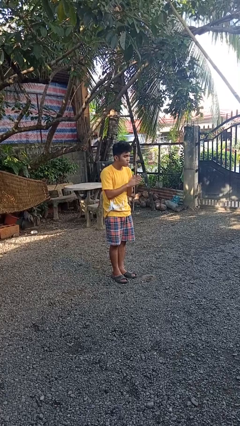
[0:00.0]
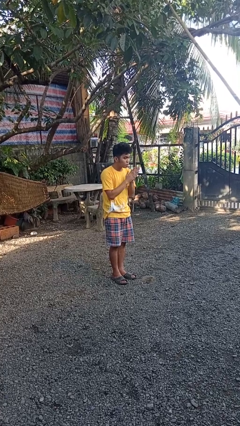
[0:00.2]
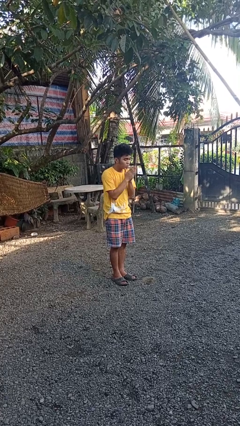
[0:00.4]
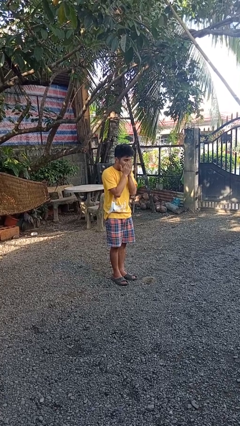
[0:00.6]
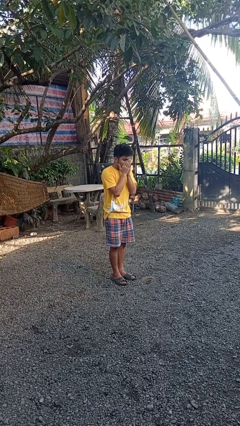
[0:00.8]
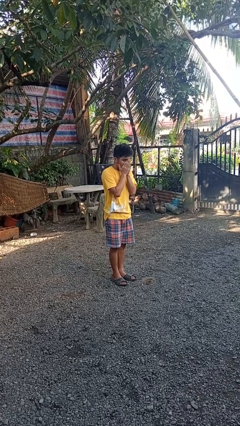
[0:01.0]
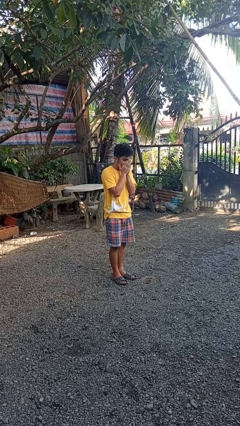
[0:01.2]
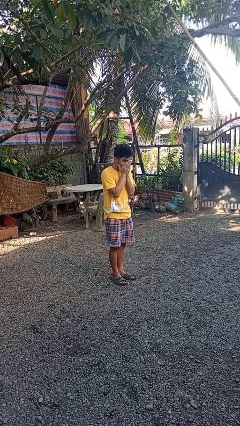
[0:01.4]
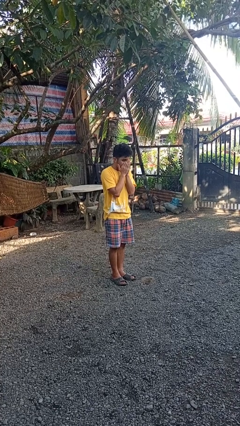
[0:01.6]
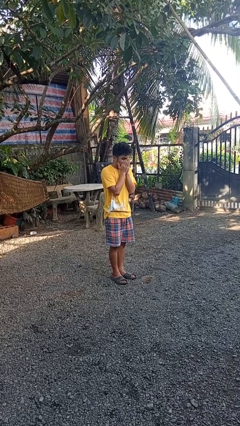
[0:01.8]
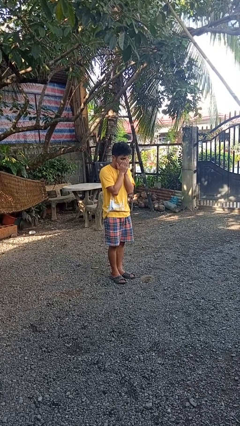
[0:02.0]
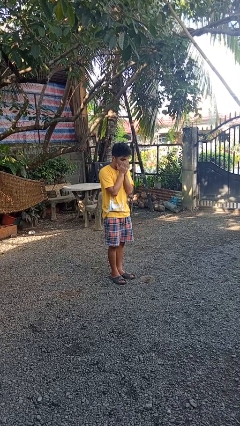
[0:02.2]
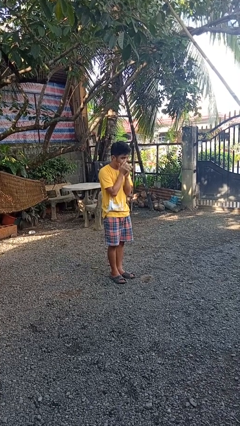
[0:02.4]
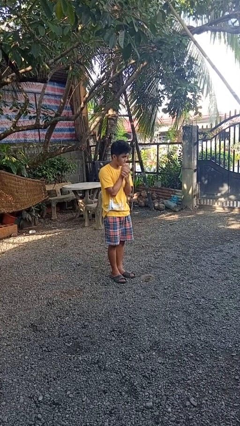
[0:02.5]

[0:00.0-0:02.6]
person blows into hands

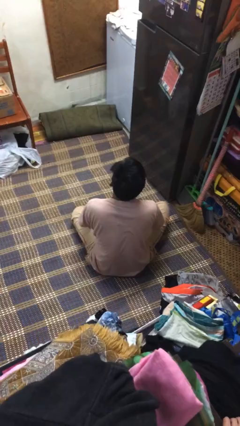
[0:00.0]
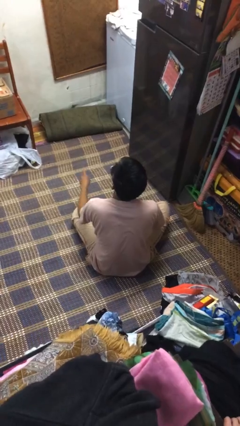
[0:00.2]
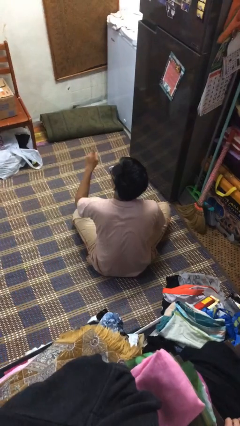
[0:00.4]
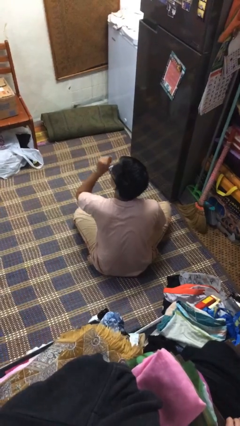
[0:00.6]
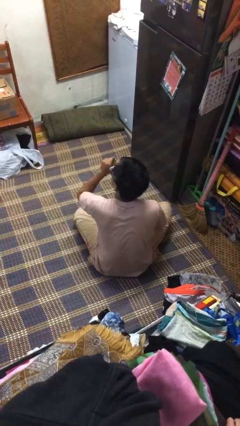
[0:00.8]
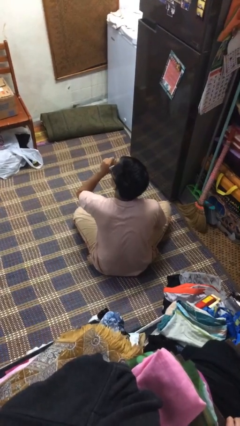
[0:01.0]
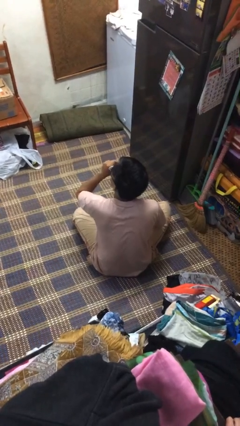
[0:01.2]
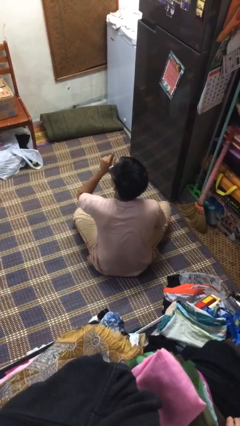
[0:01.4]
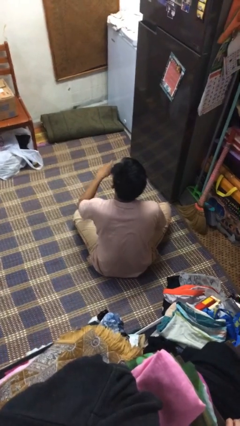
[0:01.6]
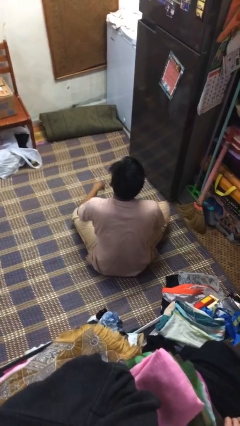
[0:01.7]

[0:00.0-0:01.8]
person gestures be quiet

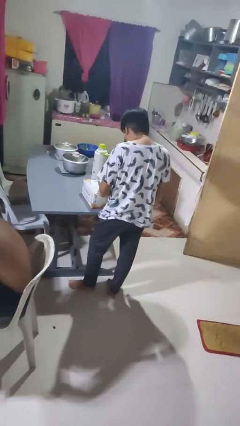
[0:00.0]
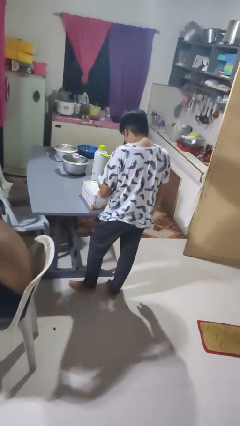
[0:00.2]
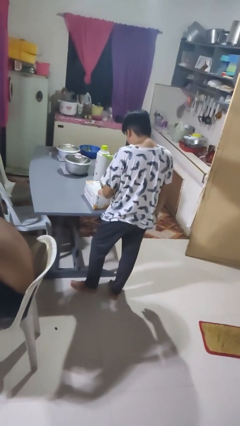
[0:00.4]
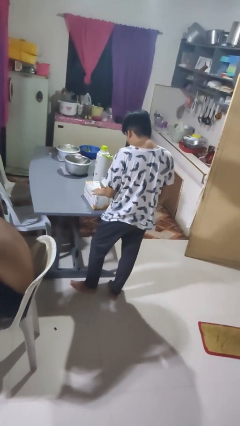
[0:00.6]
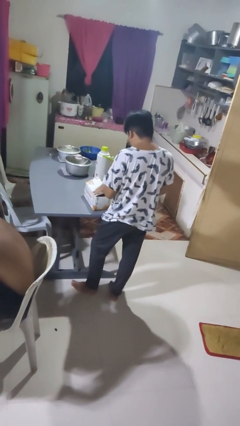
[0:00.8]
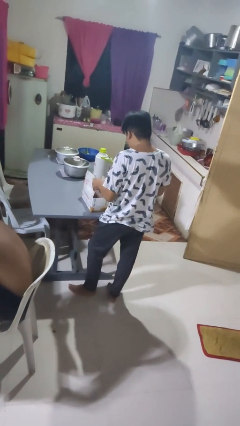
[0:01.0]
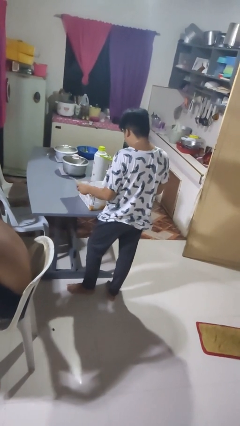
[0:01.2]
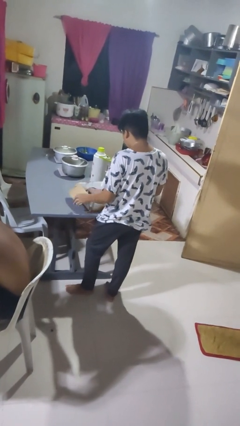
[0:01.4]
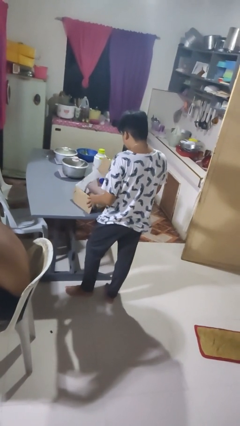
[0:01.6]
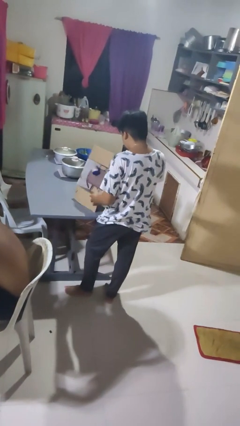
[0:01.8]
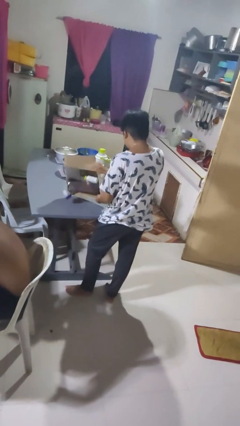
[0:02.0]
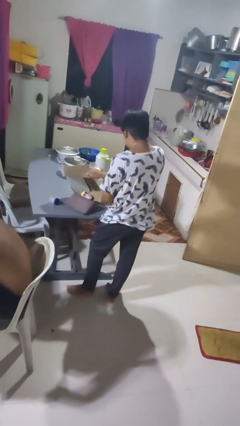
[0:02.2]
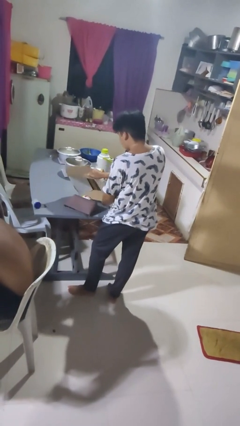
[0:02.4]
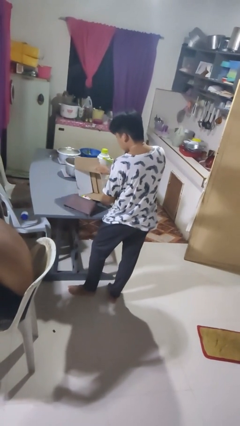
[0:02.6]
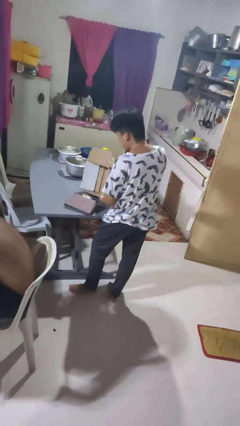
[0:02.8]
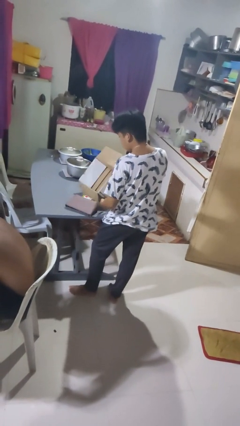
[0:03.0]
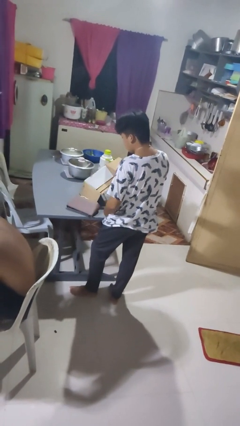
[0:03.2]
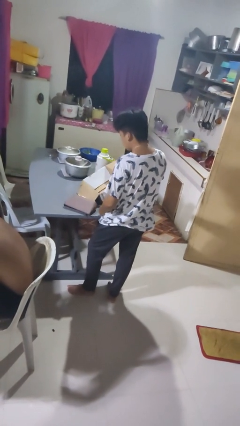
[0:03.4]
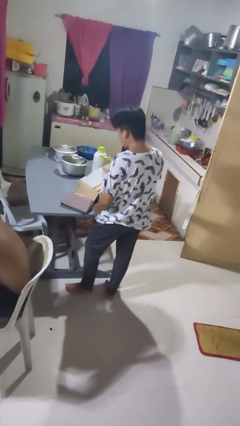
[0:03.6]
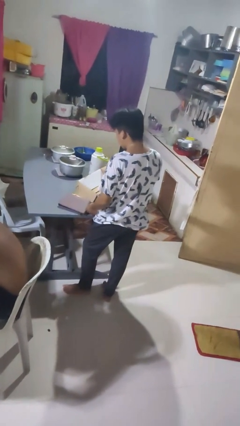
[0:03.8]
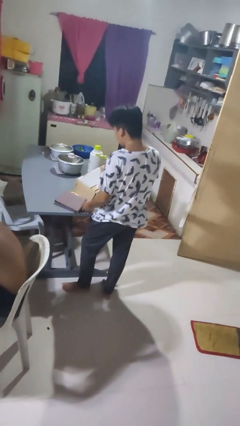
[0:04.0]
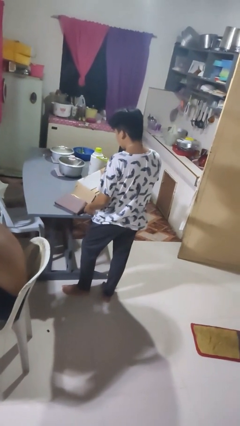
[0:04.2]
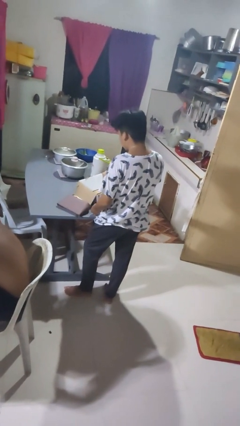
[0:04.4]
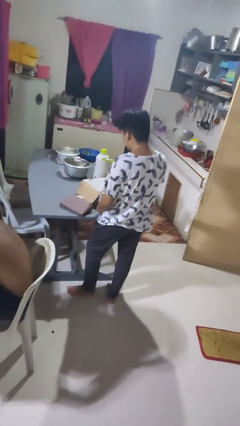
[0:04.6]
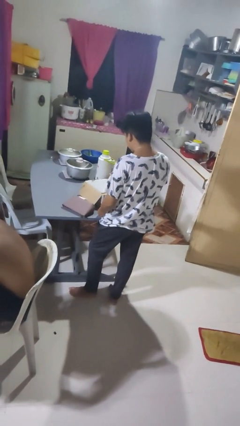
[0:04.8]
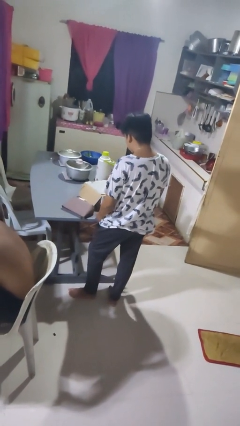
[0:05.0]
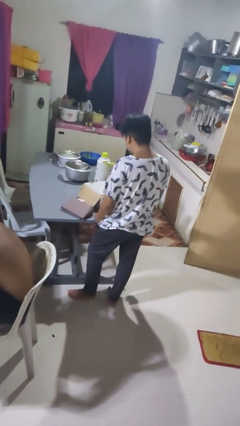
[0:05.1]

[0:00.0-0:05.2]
person unloads box onto table

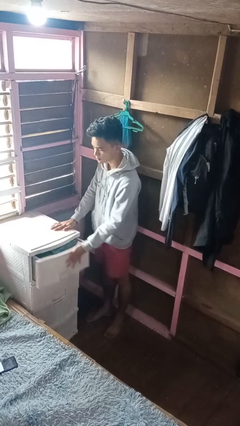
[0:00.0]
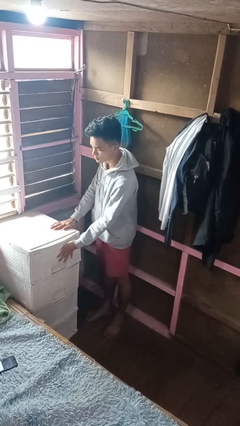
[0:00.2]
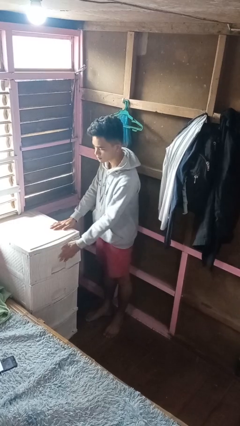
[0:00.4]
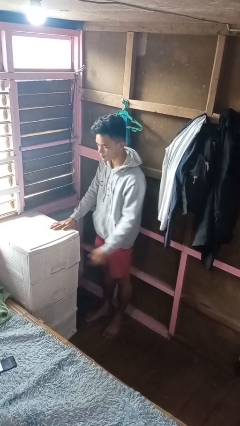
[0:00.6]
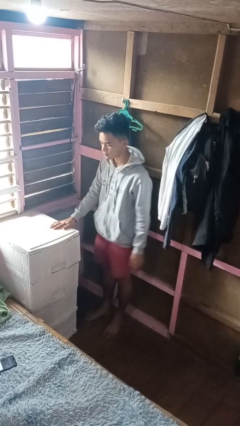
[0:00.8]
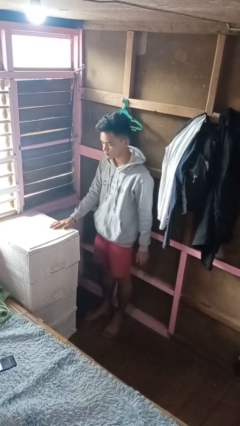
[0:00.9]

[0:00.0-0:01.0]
person closes dresser drawer

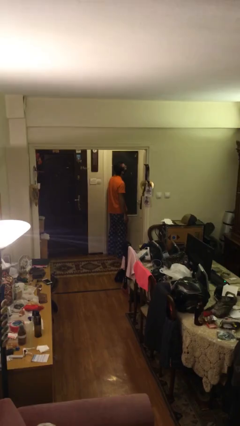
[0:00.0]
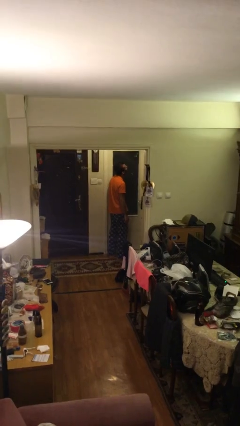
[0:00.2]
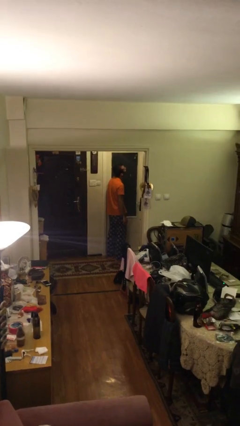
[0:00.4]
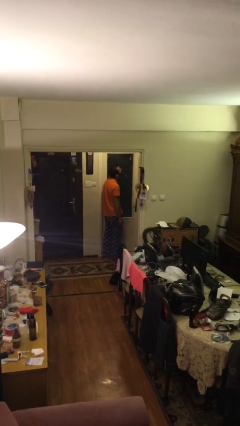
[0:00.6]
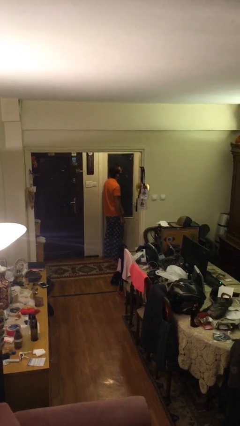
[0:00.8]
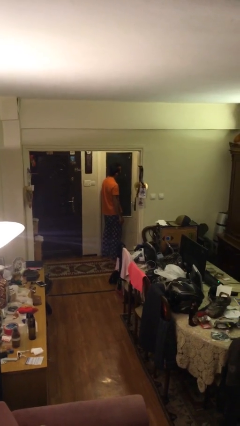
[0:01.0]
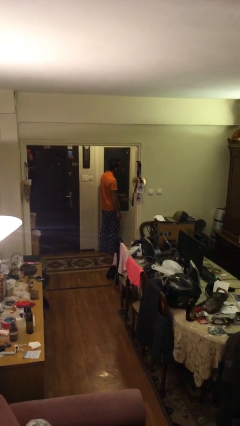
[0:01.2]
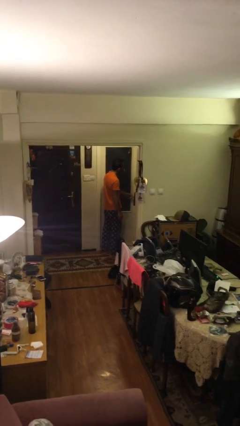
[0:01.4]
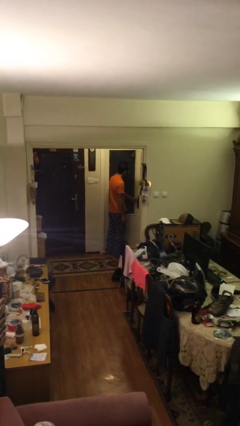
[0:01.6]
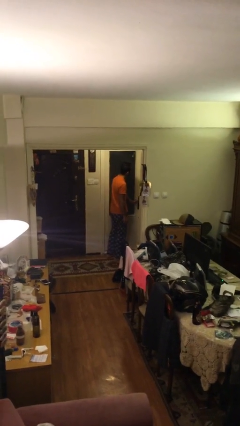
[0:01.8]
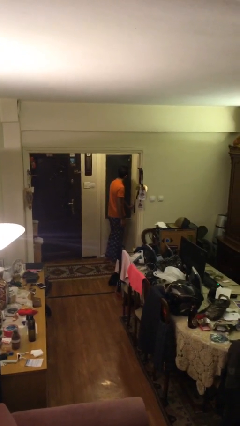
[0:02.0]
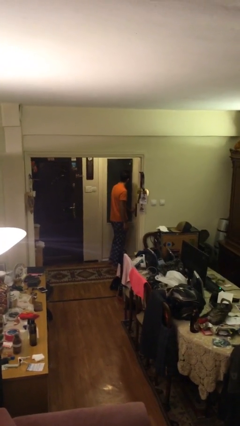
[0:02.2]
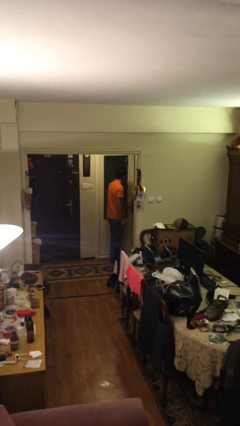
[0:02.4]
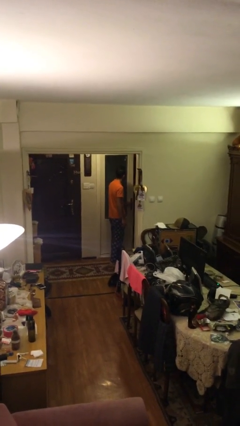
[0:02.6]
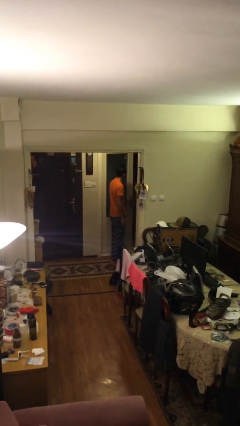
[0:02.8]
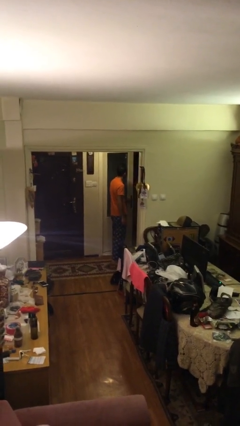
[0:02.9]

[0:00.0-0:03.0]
person opens facility door

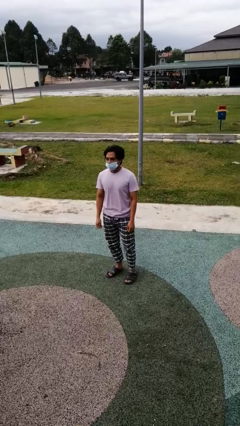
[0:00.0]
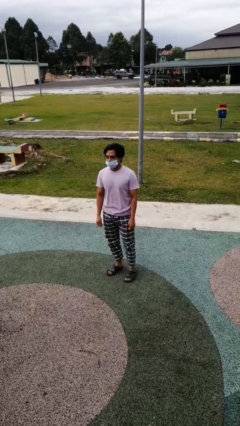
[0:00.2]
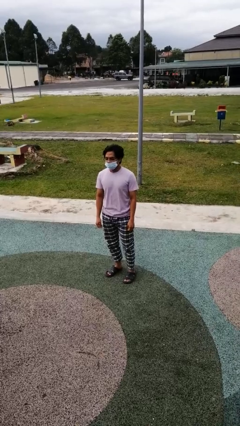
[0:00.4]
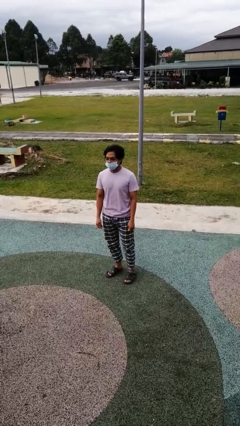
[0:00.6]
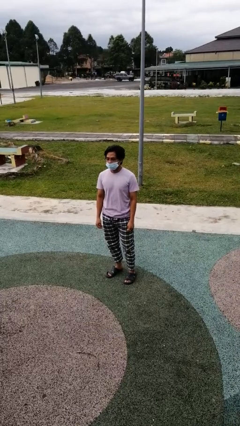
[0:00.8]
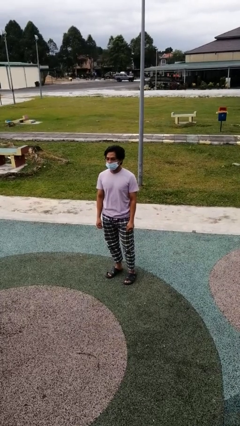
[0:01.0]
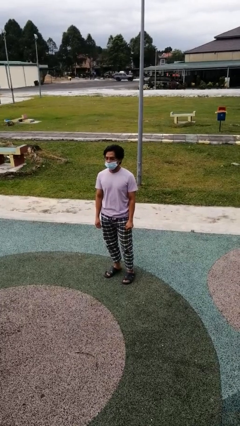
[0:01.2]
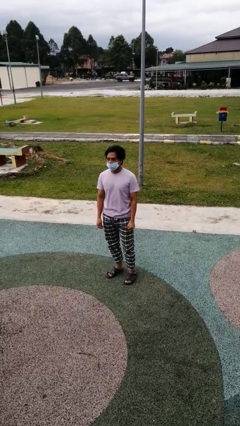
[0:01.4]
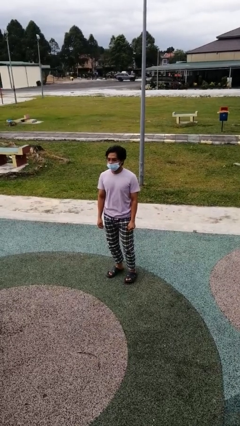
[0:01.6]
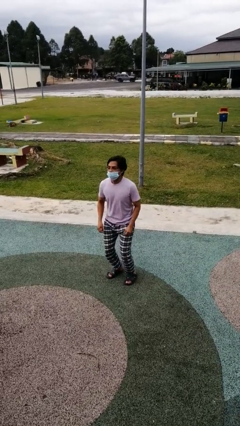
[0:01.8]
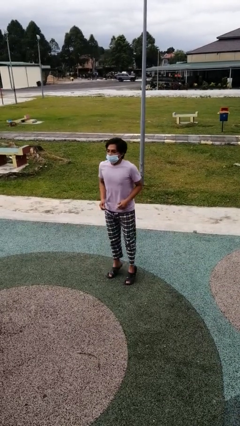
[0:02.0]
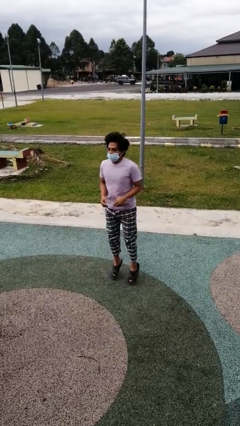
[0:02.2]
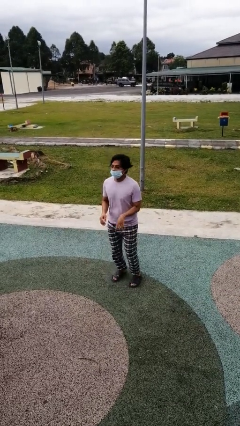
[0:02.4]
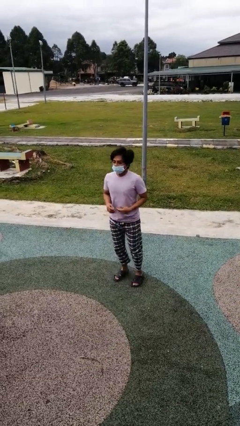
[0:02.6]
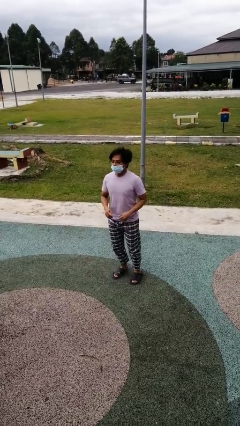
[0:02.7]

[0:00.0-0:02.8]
person jumps

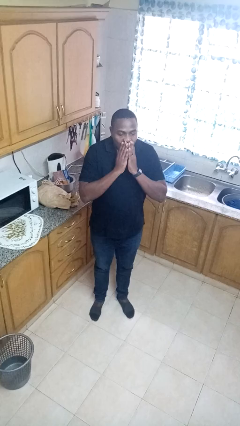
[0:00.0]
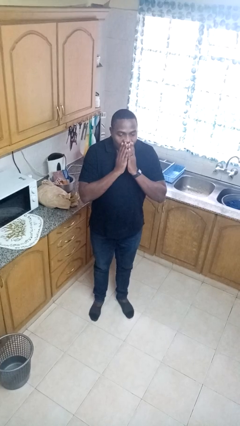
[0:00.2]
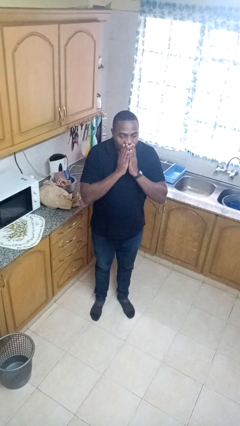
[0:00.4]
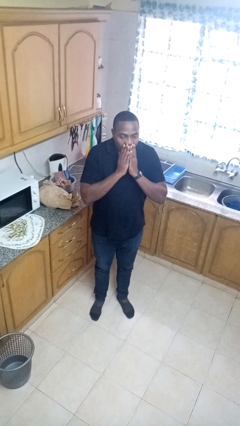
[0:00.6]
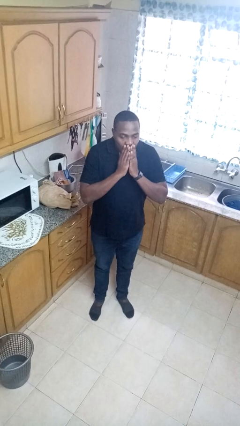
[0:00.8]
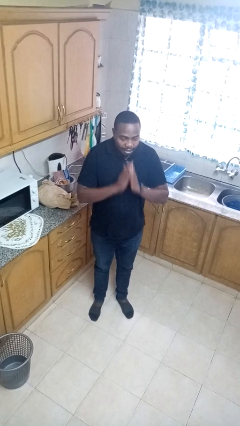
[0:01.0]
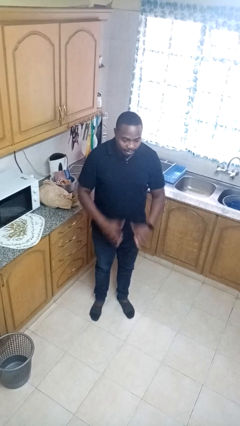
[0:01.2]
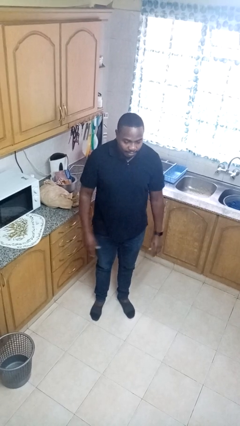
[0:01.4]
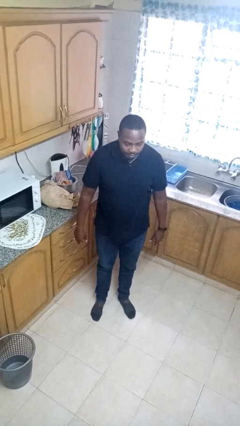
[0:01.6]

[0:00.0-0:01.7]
person yawns
